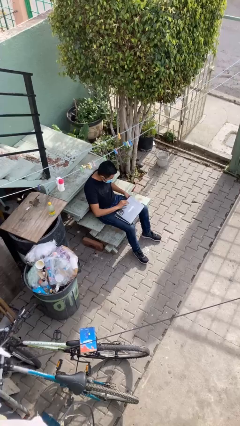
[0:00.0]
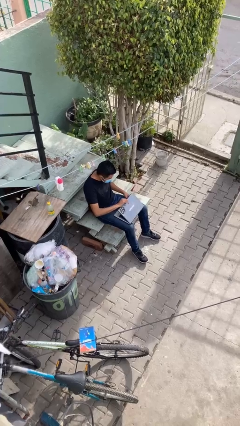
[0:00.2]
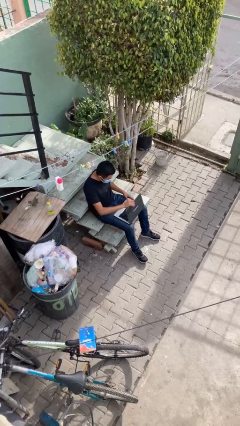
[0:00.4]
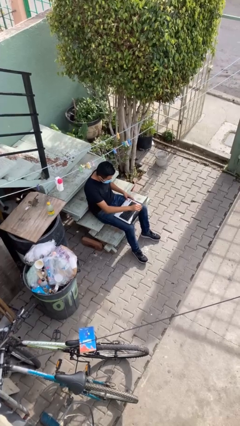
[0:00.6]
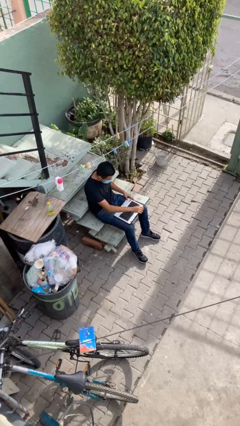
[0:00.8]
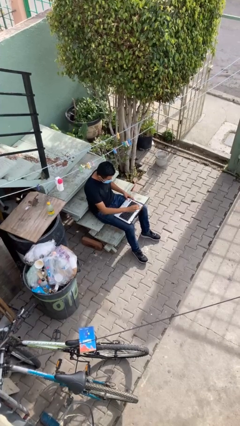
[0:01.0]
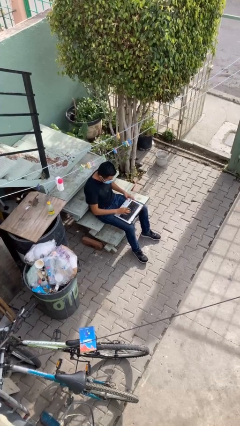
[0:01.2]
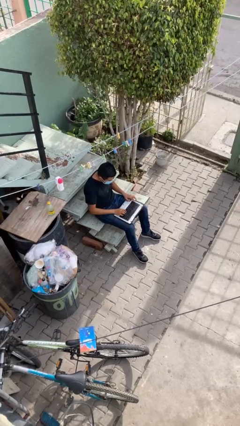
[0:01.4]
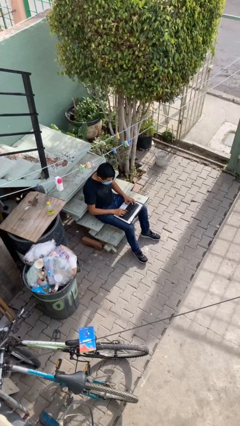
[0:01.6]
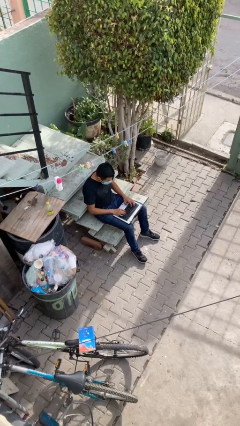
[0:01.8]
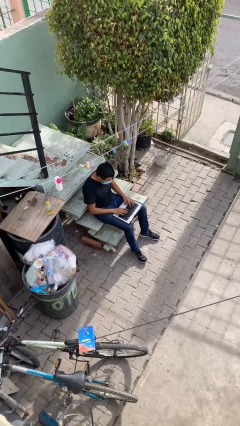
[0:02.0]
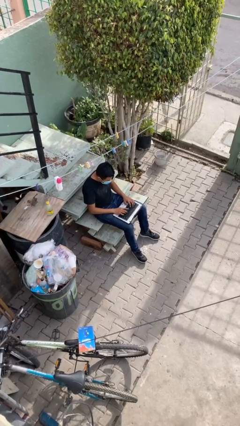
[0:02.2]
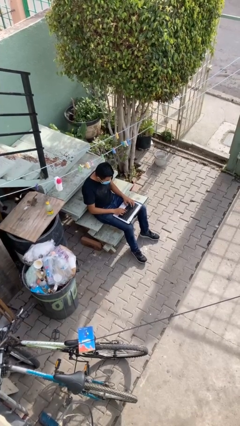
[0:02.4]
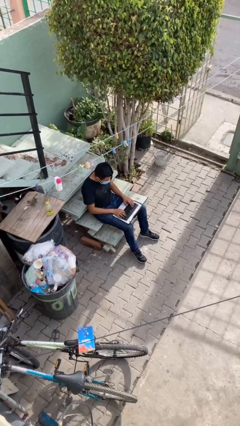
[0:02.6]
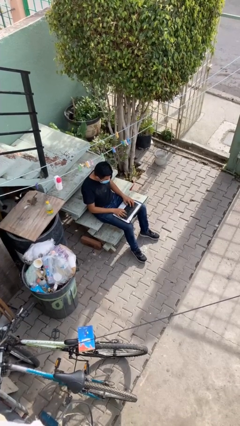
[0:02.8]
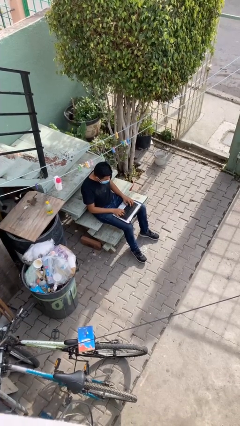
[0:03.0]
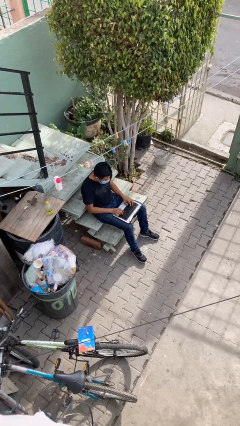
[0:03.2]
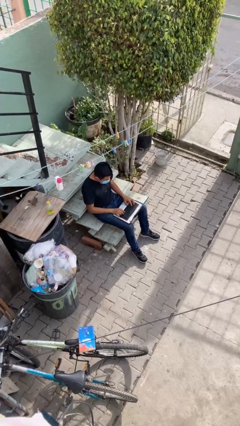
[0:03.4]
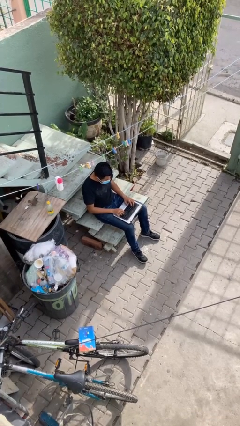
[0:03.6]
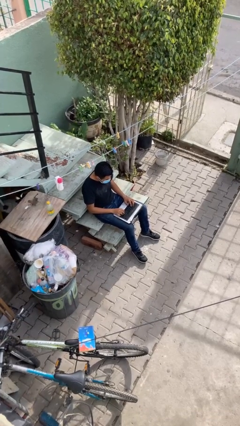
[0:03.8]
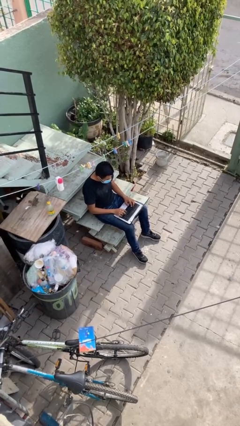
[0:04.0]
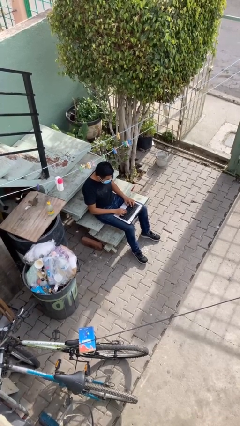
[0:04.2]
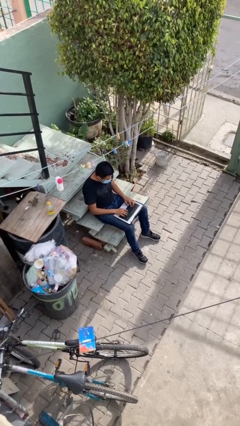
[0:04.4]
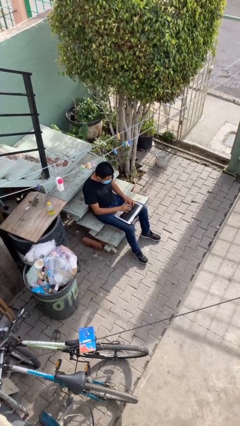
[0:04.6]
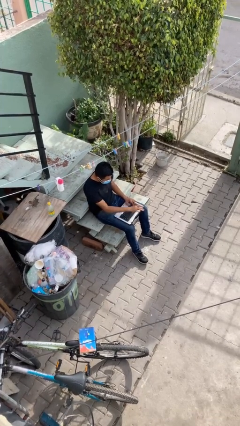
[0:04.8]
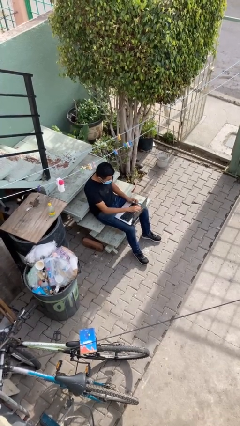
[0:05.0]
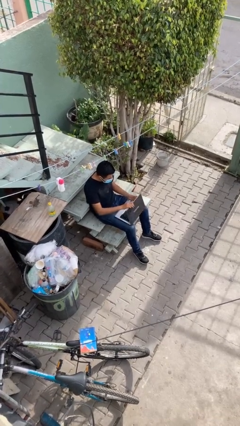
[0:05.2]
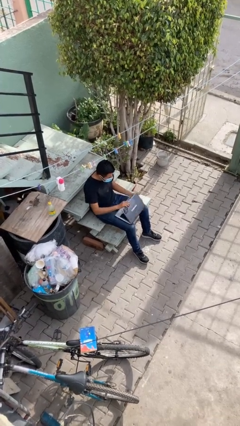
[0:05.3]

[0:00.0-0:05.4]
person interacts with laptop

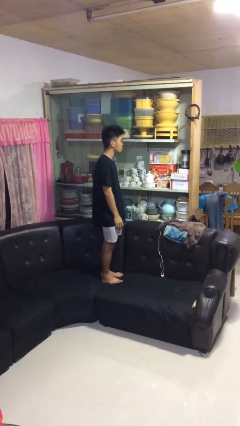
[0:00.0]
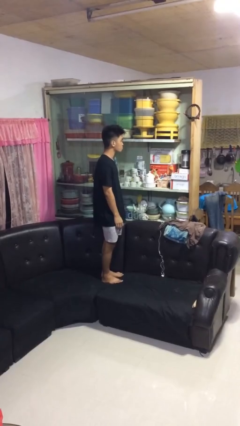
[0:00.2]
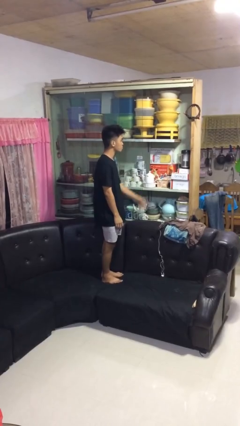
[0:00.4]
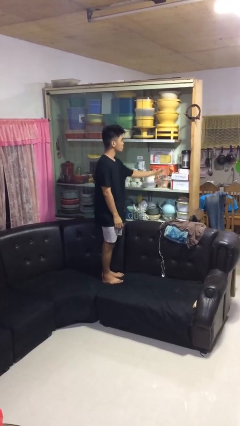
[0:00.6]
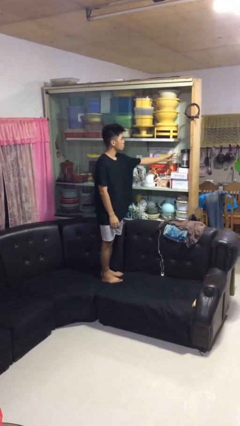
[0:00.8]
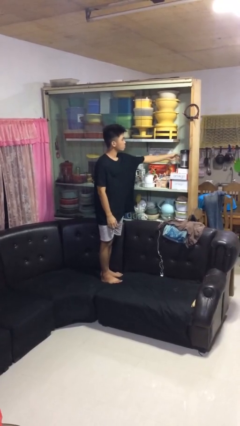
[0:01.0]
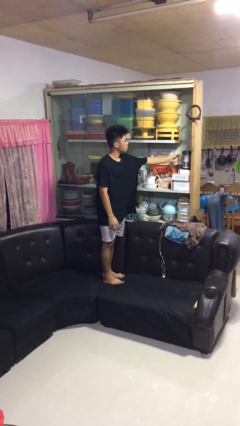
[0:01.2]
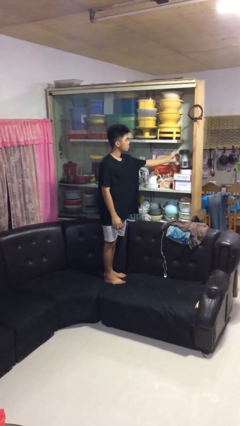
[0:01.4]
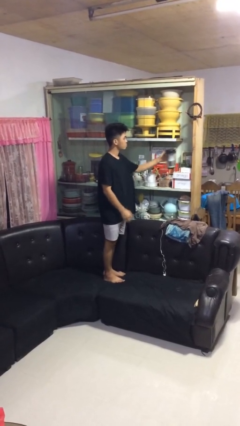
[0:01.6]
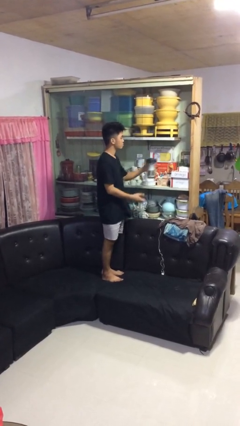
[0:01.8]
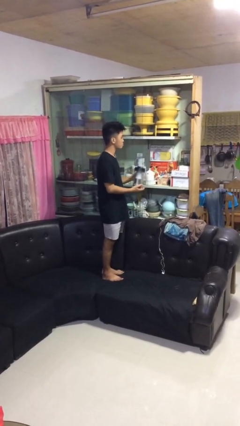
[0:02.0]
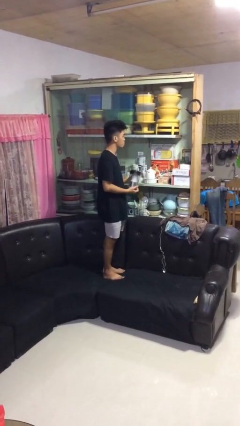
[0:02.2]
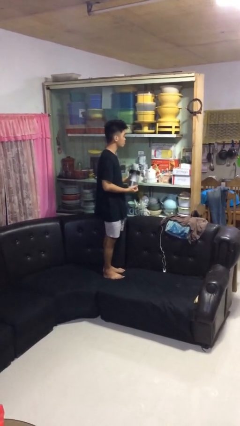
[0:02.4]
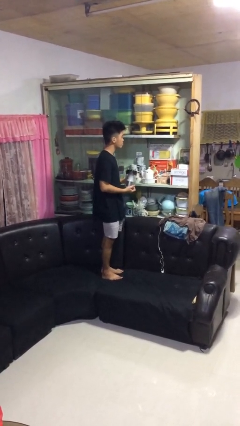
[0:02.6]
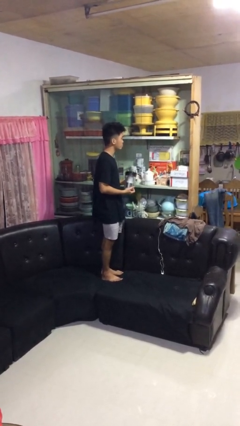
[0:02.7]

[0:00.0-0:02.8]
person picks up object from cabinet

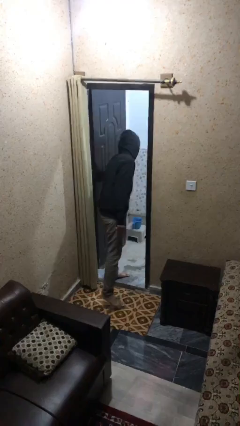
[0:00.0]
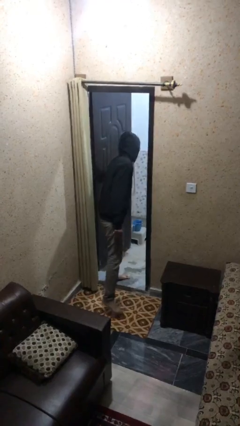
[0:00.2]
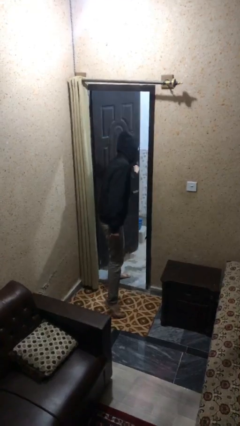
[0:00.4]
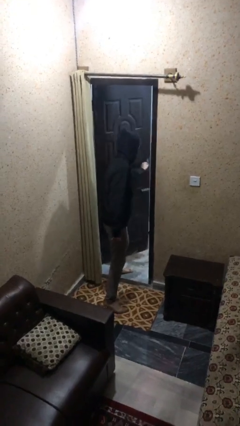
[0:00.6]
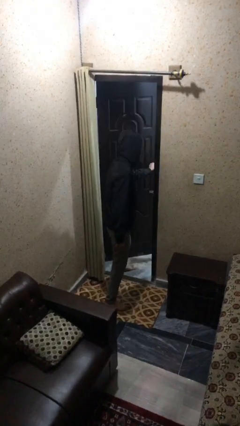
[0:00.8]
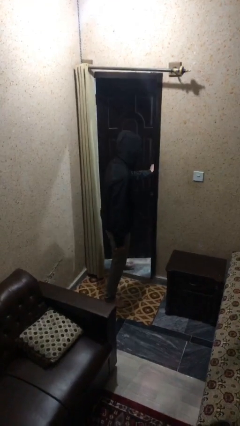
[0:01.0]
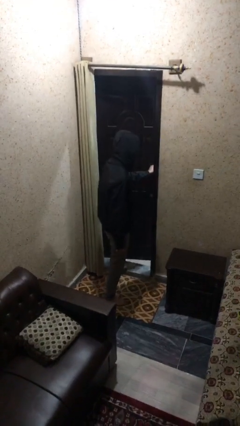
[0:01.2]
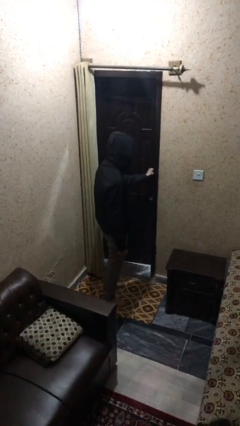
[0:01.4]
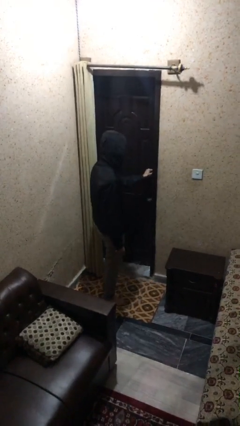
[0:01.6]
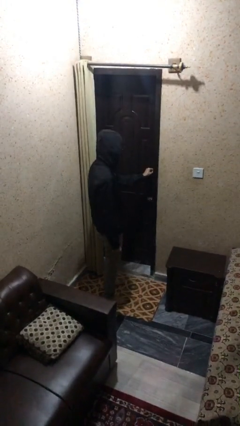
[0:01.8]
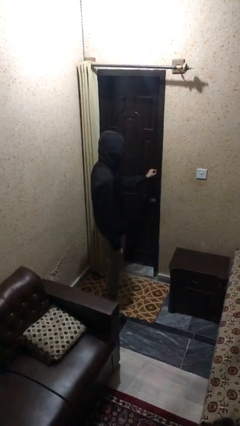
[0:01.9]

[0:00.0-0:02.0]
person closes facility door

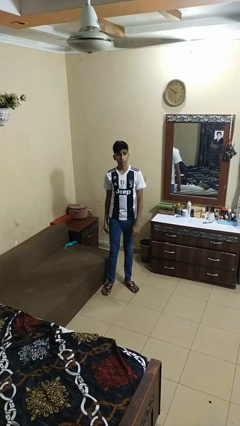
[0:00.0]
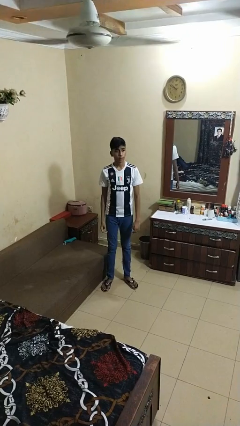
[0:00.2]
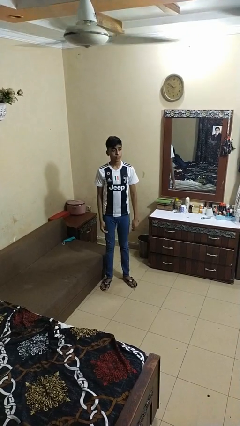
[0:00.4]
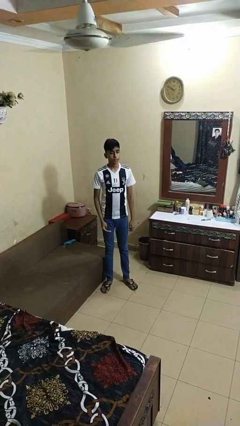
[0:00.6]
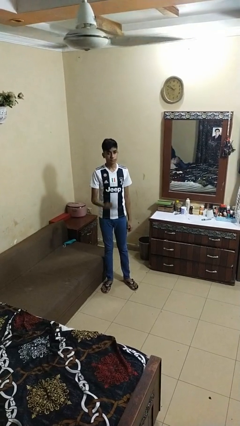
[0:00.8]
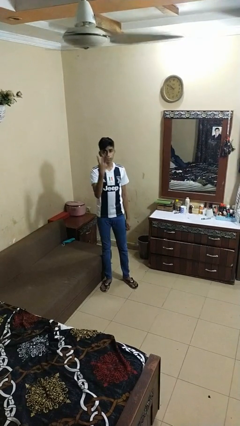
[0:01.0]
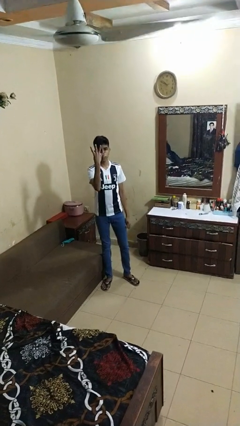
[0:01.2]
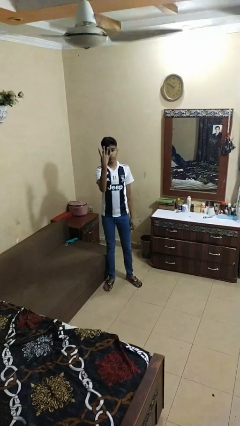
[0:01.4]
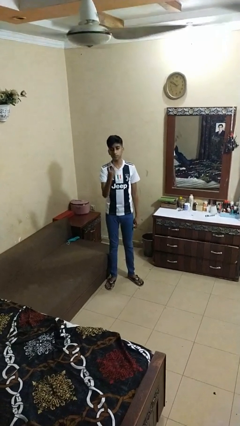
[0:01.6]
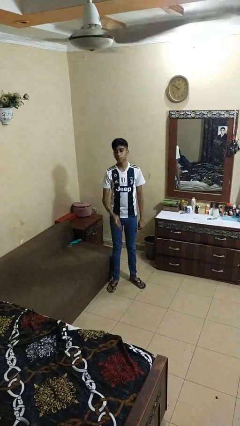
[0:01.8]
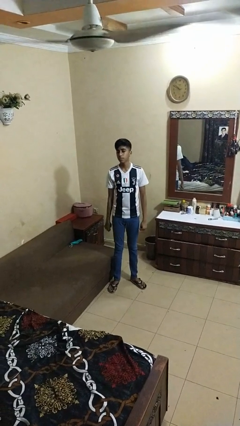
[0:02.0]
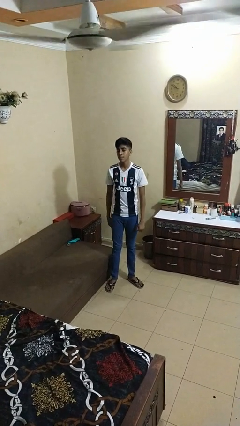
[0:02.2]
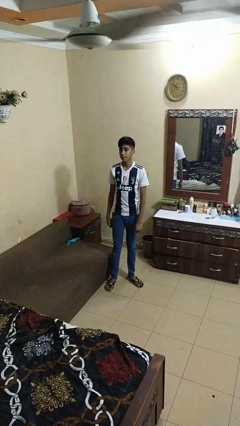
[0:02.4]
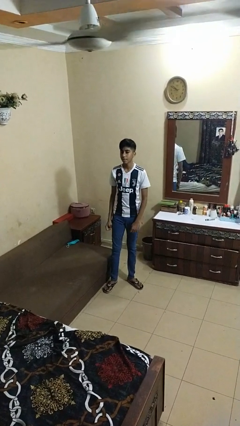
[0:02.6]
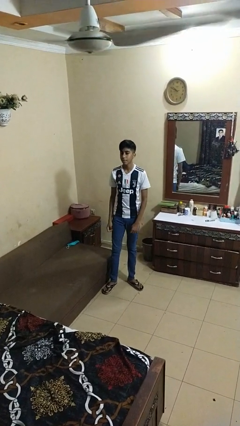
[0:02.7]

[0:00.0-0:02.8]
person gestures number four

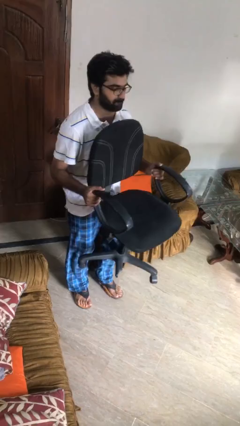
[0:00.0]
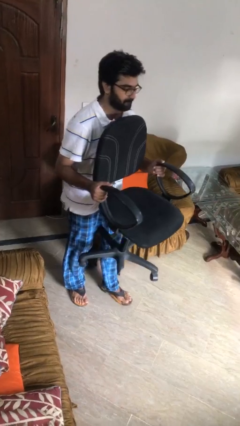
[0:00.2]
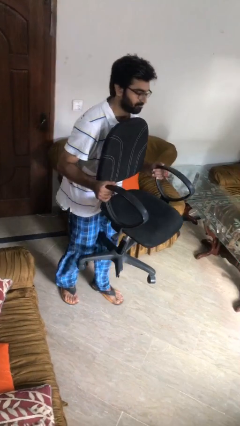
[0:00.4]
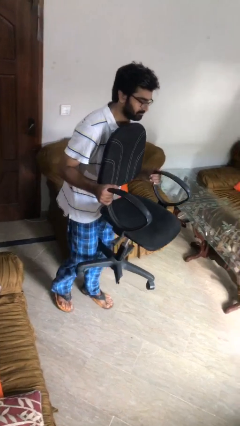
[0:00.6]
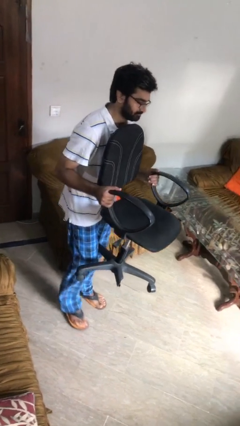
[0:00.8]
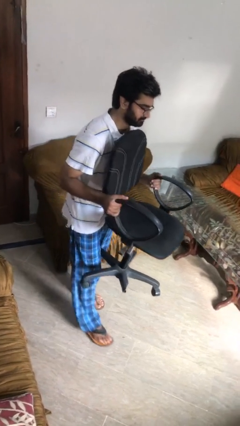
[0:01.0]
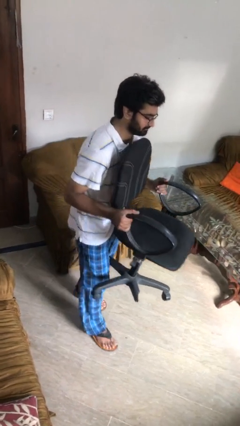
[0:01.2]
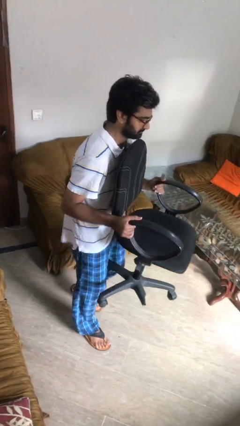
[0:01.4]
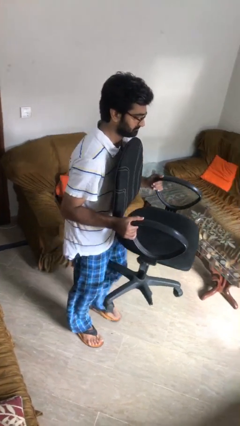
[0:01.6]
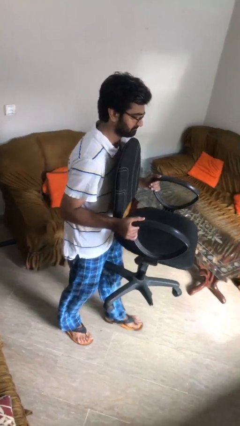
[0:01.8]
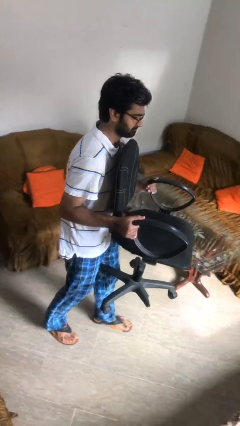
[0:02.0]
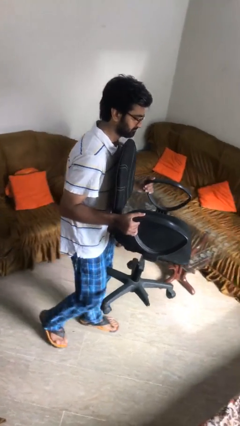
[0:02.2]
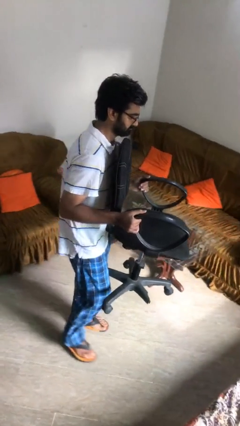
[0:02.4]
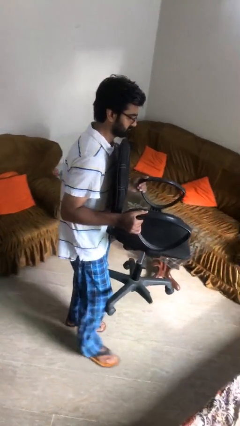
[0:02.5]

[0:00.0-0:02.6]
person carries heavy object

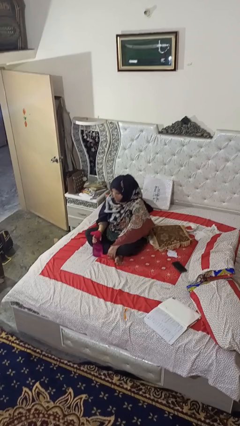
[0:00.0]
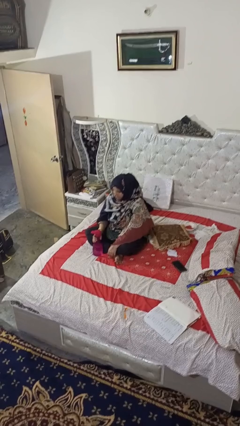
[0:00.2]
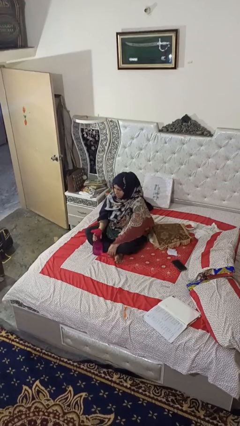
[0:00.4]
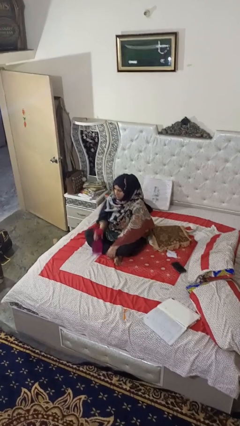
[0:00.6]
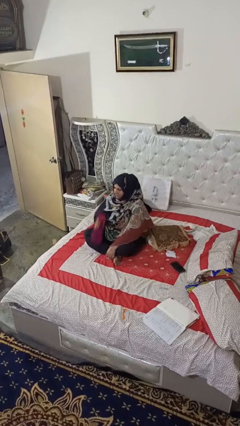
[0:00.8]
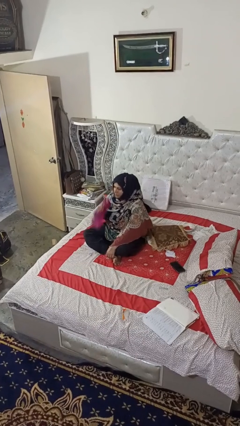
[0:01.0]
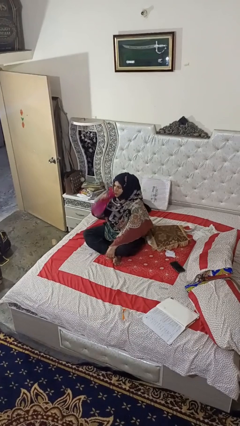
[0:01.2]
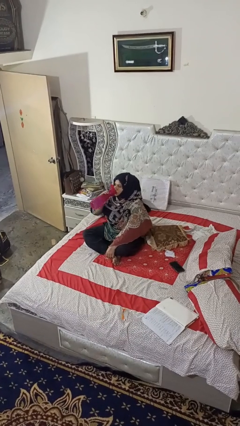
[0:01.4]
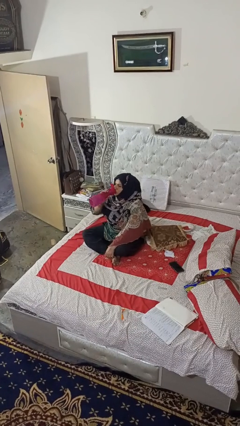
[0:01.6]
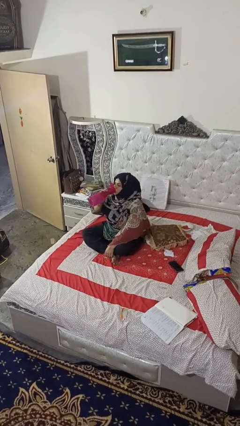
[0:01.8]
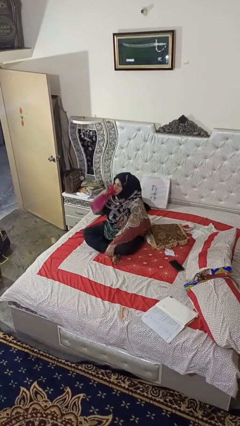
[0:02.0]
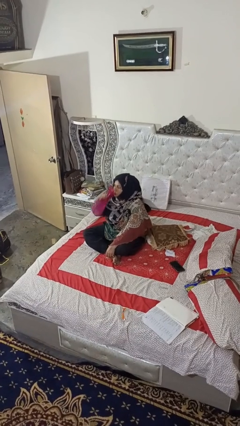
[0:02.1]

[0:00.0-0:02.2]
person drinks from bottle
